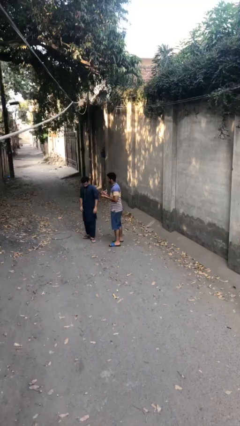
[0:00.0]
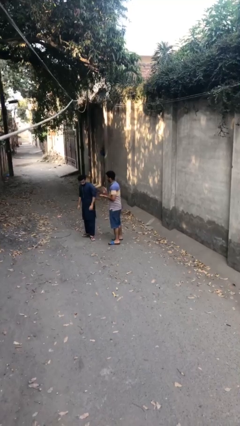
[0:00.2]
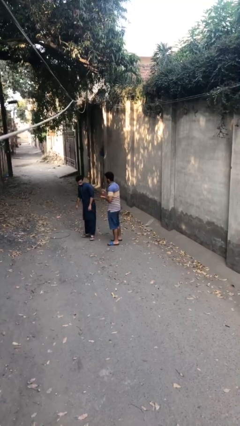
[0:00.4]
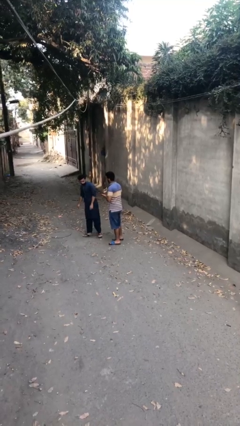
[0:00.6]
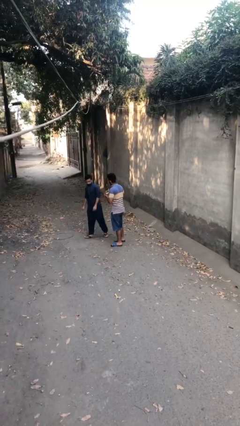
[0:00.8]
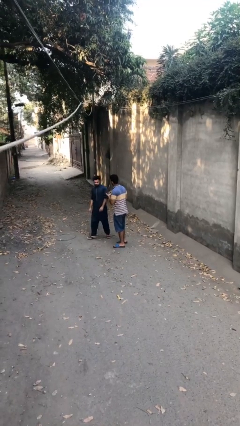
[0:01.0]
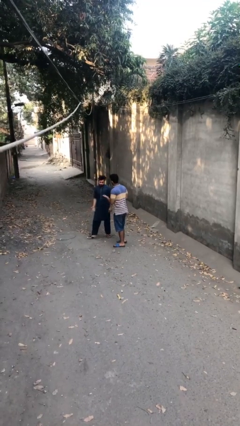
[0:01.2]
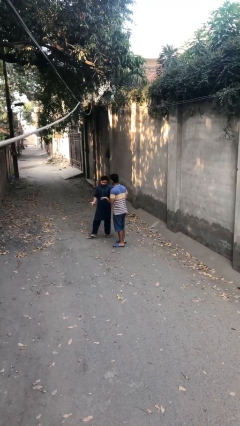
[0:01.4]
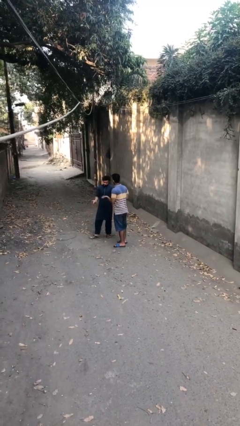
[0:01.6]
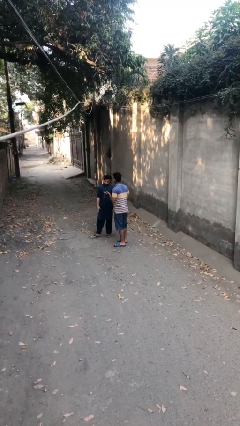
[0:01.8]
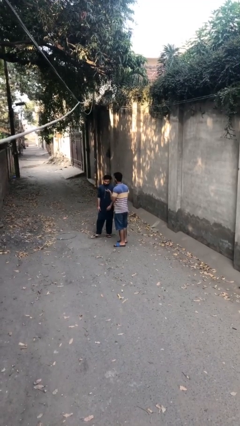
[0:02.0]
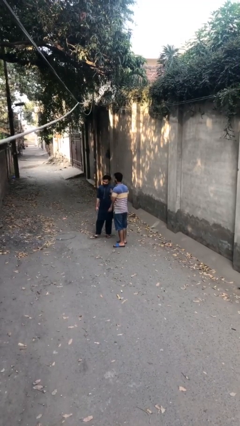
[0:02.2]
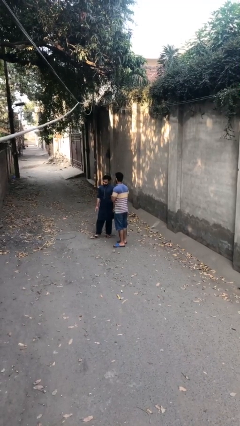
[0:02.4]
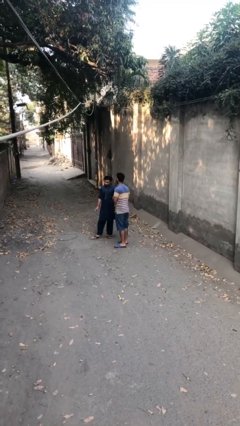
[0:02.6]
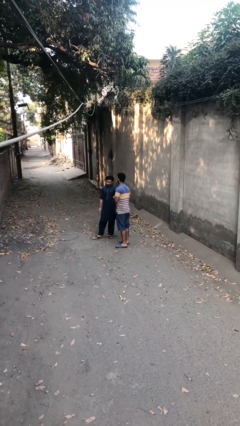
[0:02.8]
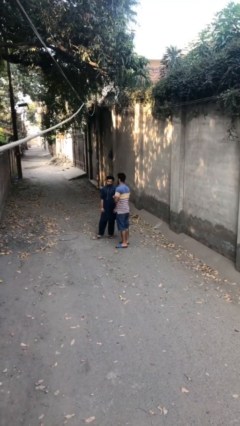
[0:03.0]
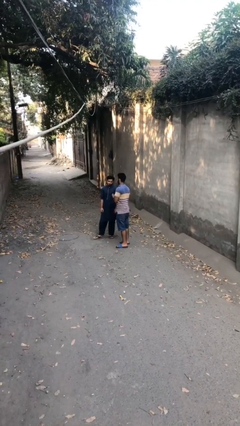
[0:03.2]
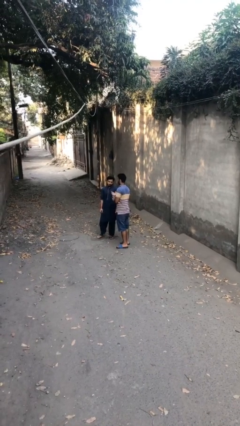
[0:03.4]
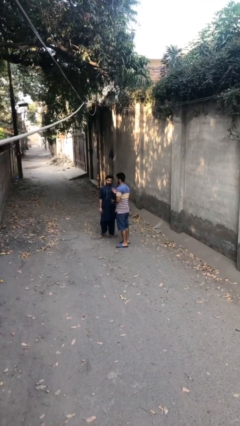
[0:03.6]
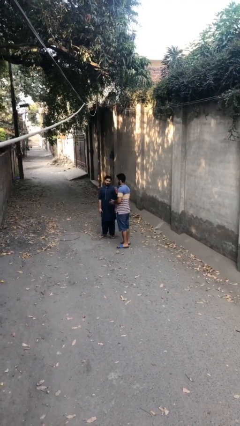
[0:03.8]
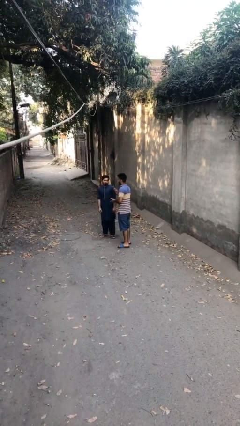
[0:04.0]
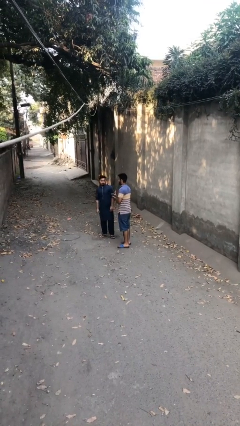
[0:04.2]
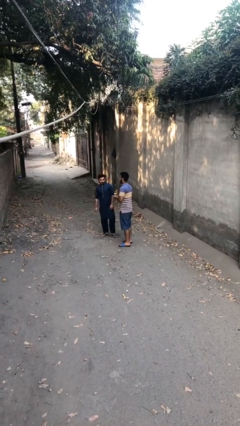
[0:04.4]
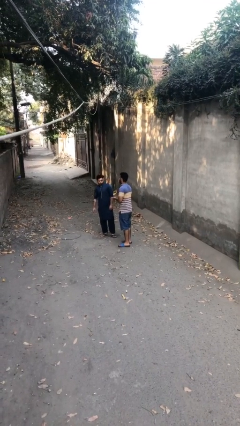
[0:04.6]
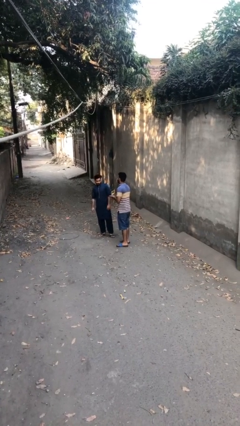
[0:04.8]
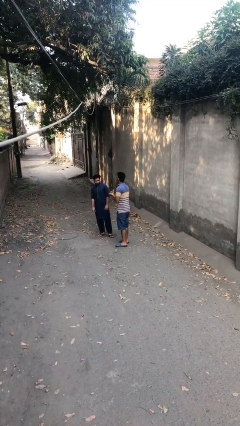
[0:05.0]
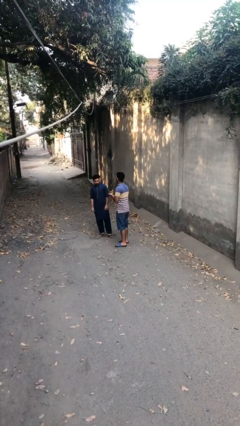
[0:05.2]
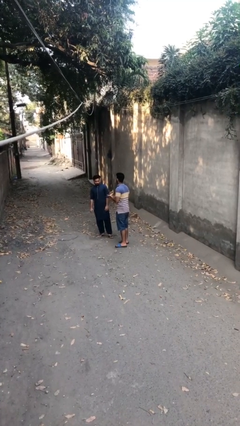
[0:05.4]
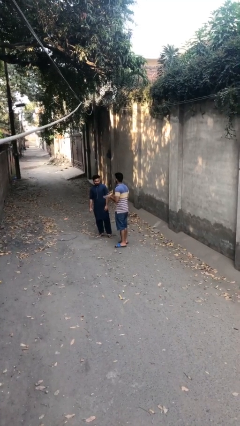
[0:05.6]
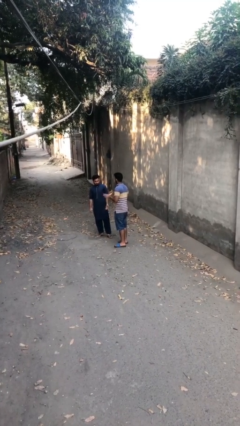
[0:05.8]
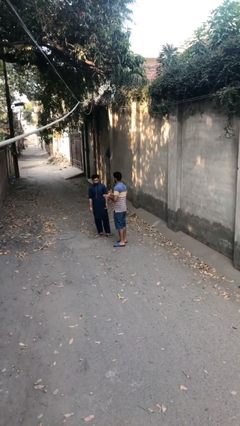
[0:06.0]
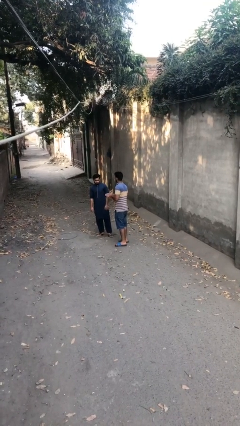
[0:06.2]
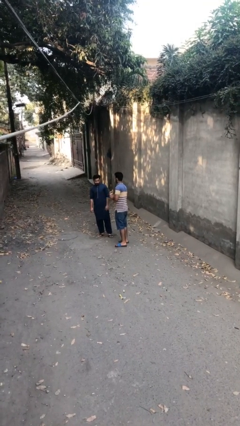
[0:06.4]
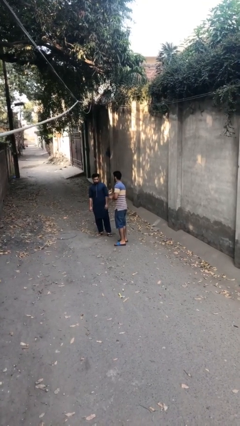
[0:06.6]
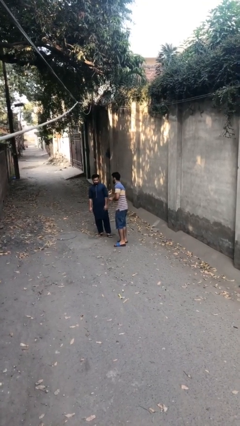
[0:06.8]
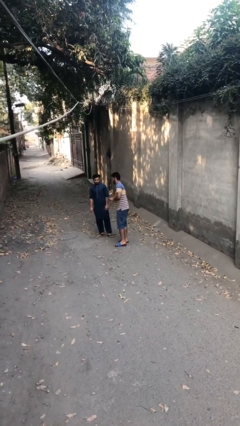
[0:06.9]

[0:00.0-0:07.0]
person talks to person

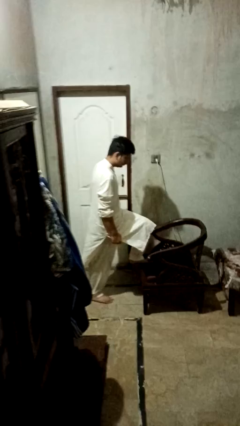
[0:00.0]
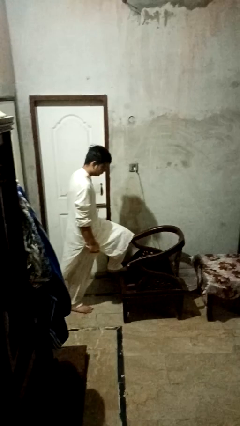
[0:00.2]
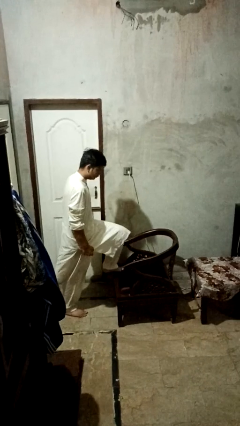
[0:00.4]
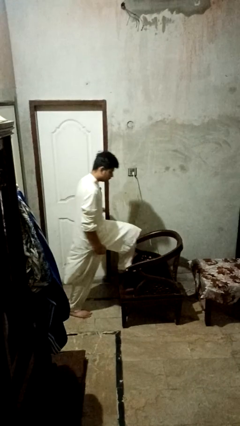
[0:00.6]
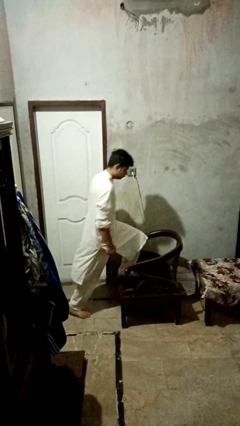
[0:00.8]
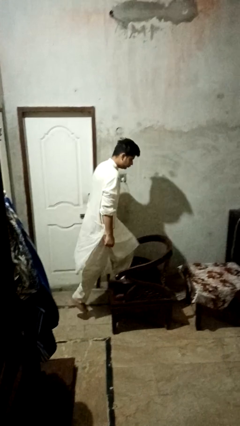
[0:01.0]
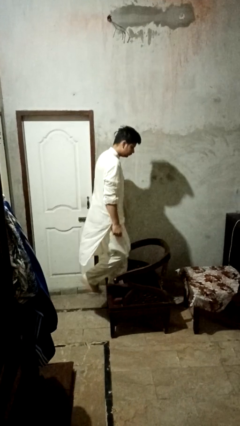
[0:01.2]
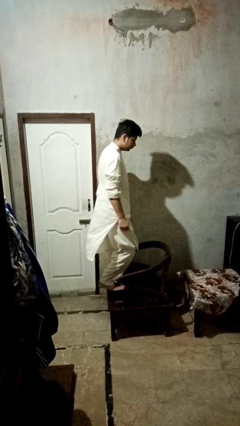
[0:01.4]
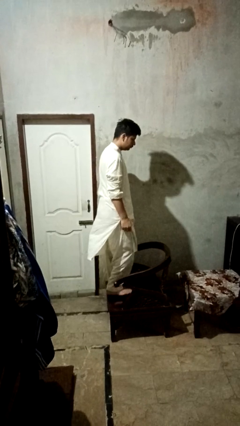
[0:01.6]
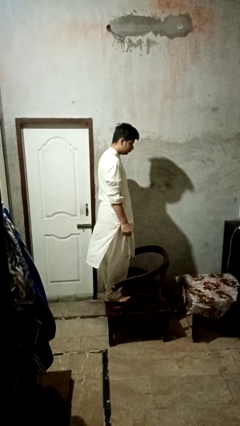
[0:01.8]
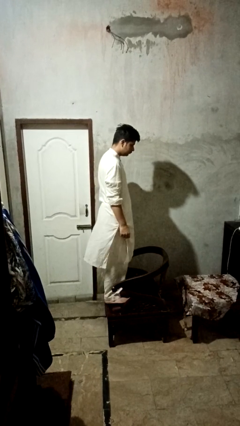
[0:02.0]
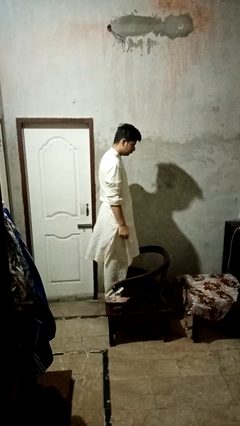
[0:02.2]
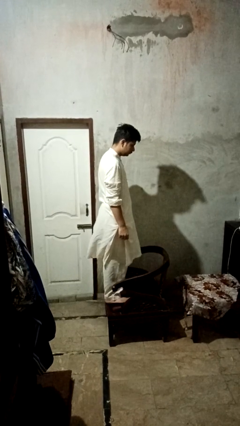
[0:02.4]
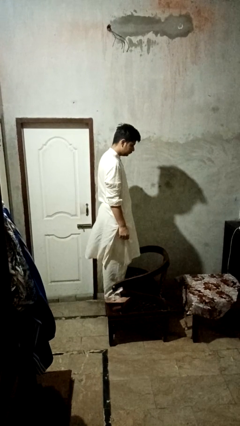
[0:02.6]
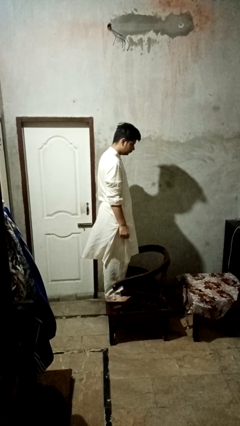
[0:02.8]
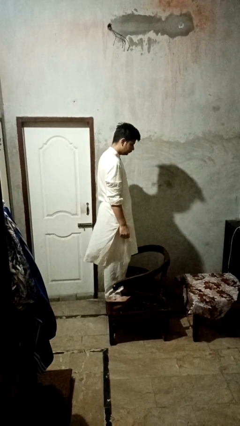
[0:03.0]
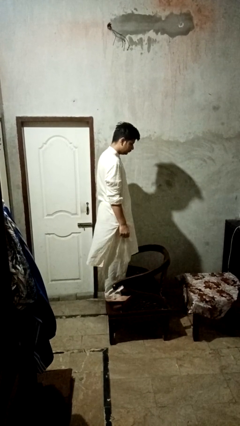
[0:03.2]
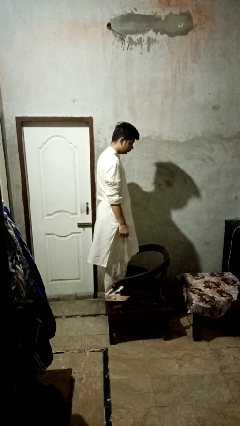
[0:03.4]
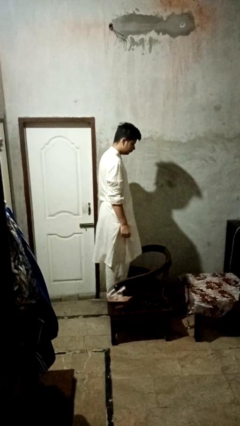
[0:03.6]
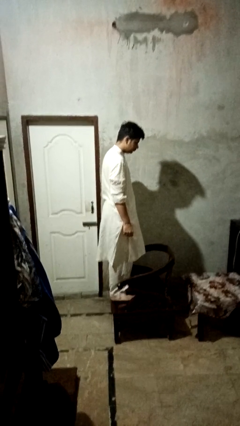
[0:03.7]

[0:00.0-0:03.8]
person climbs on couch

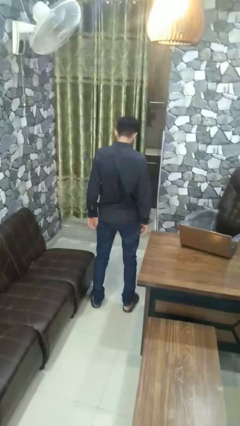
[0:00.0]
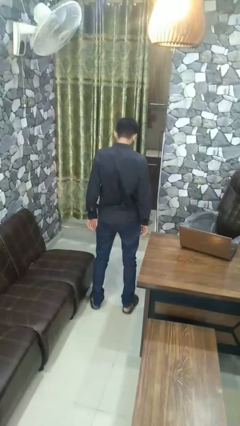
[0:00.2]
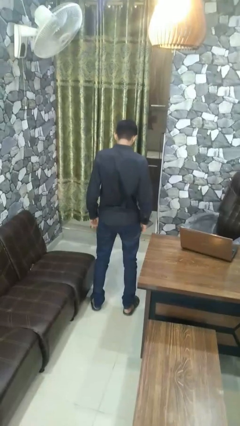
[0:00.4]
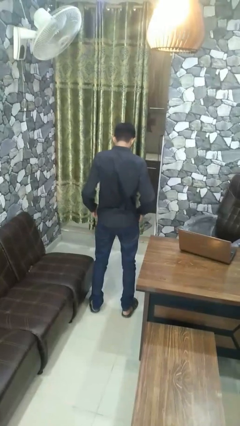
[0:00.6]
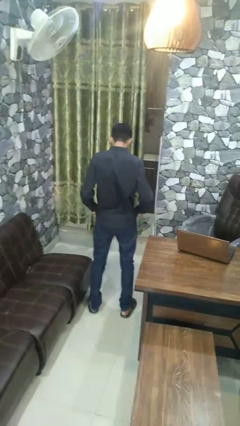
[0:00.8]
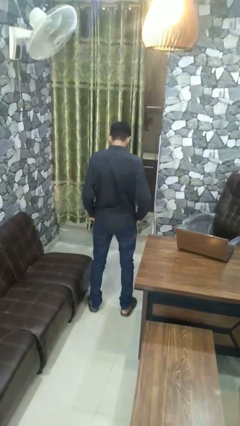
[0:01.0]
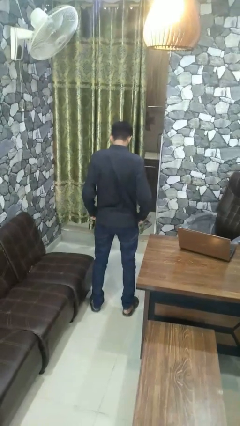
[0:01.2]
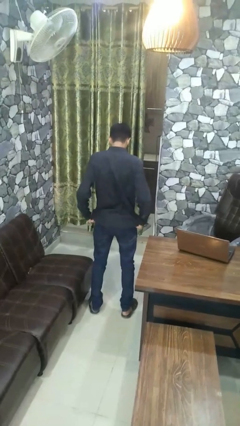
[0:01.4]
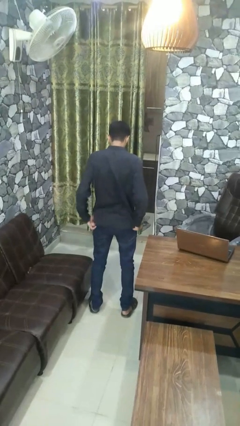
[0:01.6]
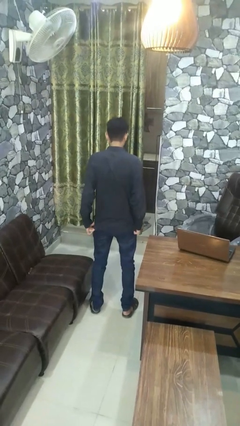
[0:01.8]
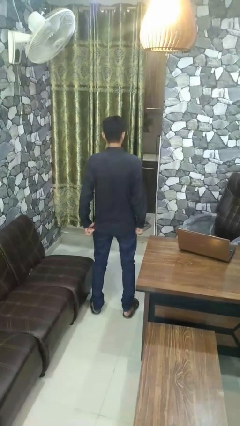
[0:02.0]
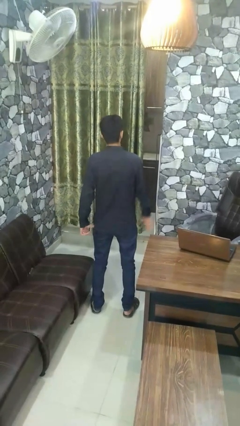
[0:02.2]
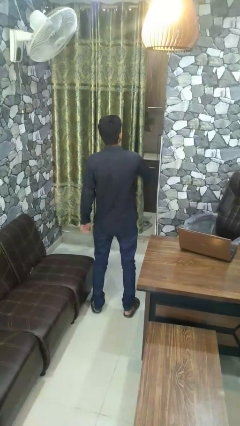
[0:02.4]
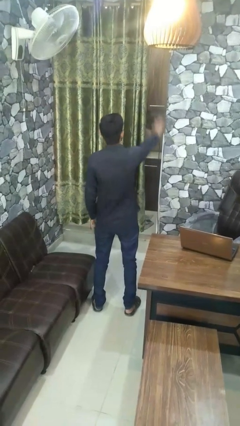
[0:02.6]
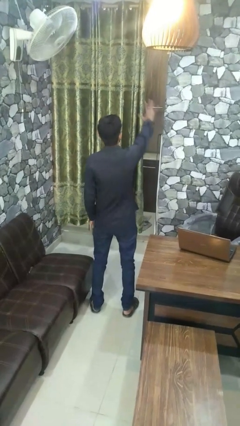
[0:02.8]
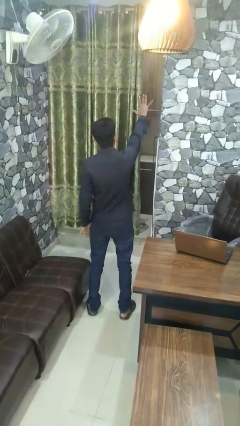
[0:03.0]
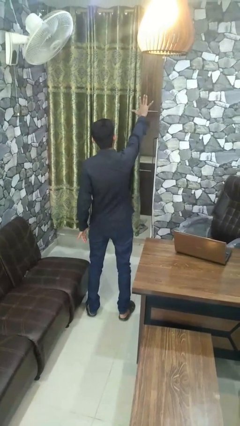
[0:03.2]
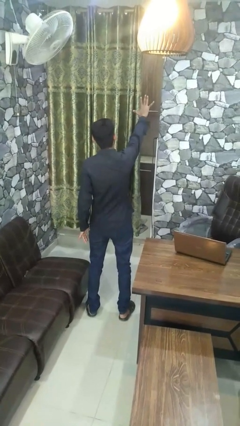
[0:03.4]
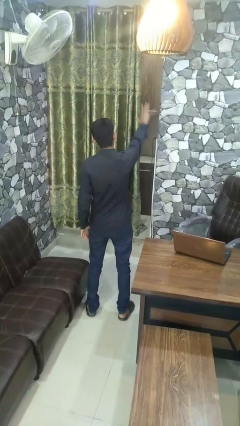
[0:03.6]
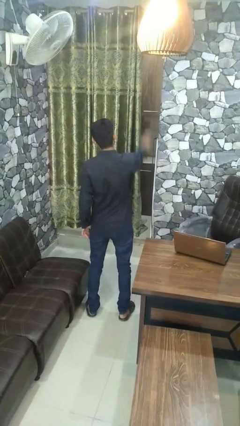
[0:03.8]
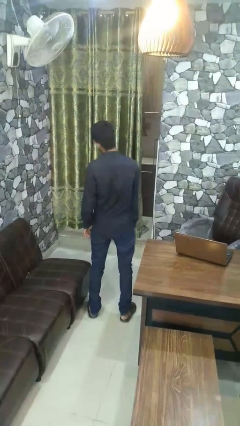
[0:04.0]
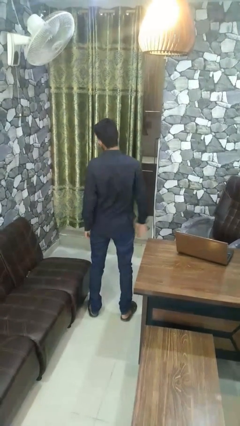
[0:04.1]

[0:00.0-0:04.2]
person gestures number five

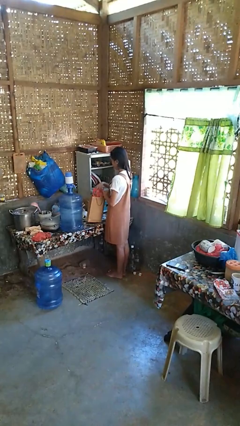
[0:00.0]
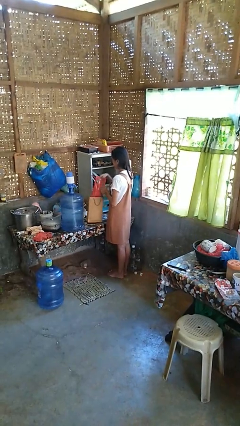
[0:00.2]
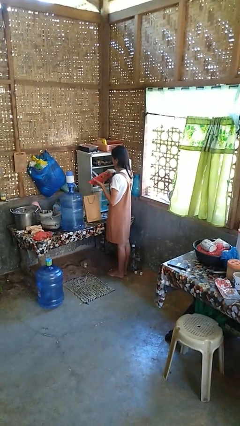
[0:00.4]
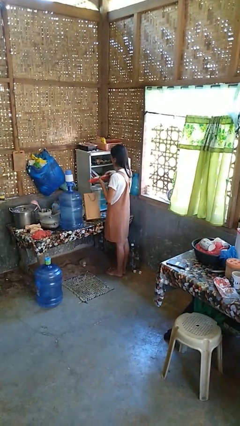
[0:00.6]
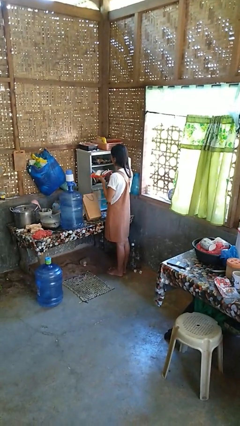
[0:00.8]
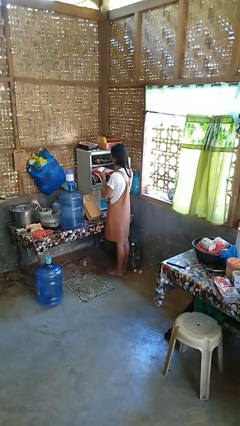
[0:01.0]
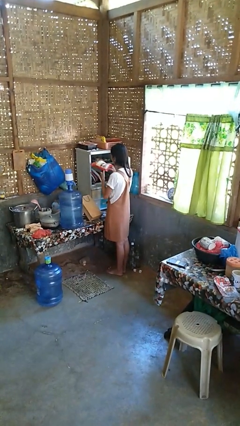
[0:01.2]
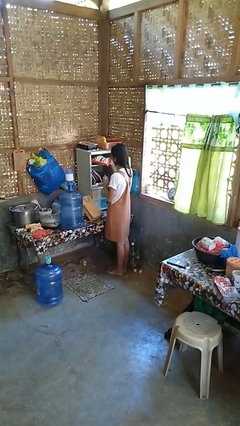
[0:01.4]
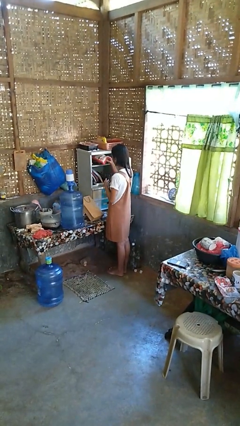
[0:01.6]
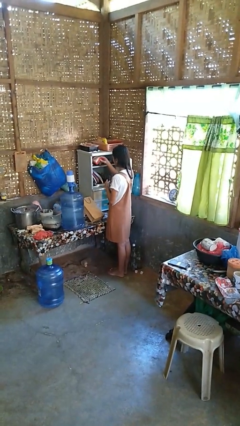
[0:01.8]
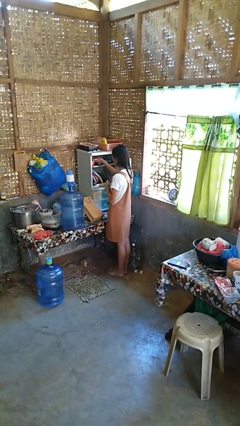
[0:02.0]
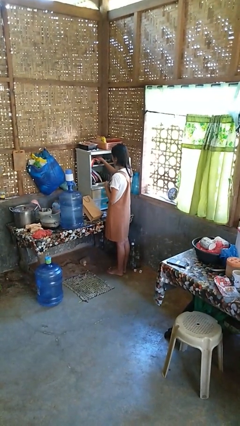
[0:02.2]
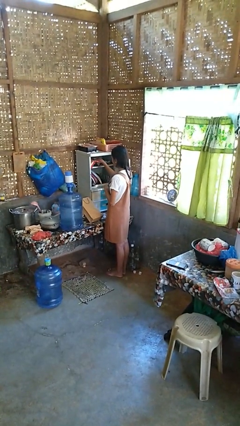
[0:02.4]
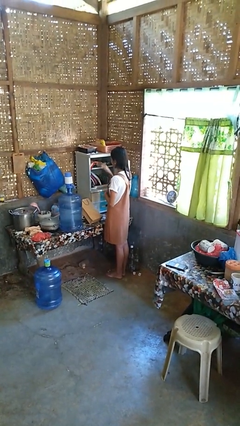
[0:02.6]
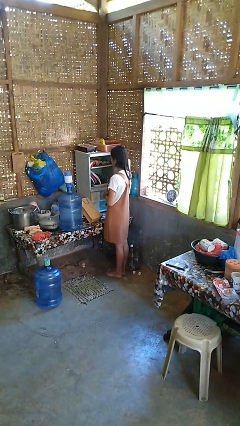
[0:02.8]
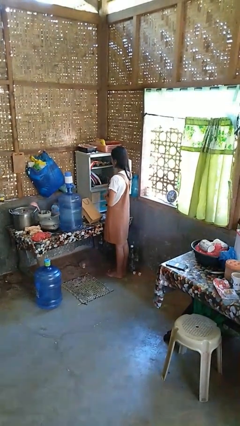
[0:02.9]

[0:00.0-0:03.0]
person loads groceries into cabinet
